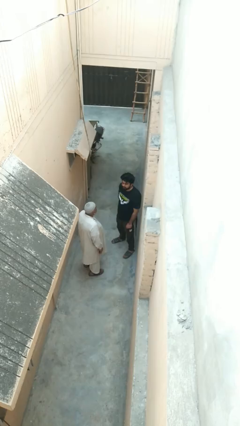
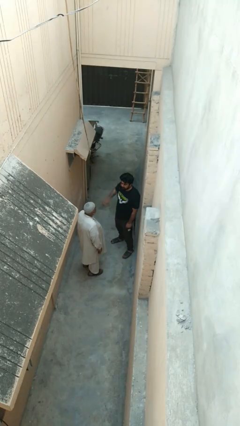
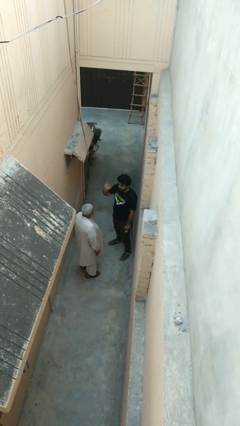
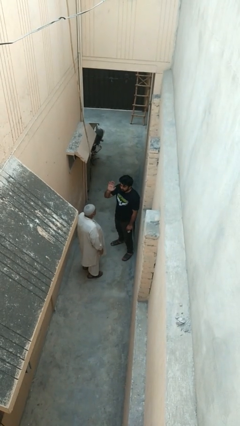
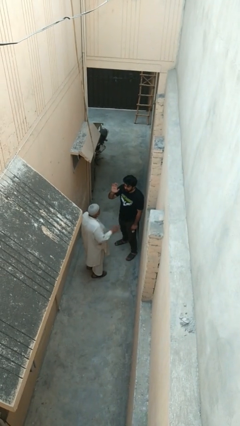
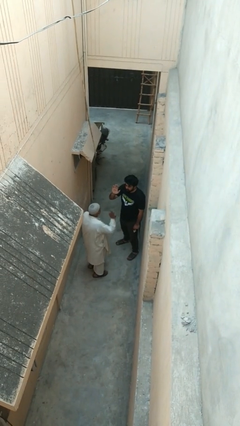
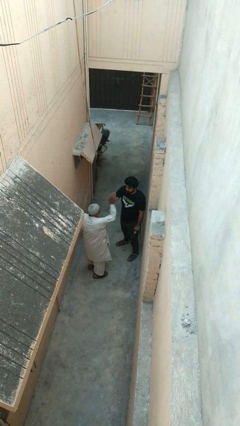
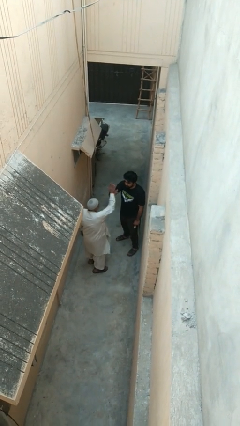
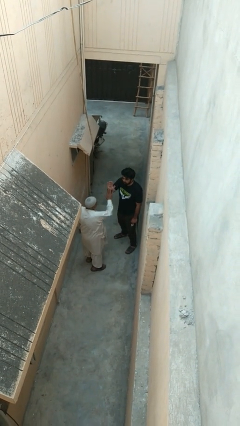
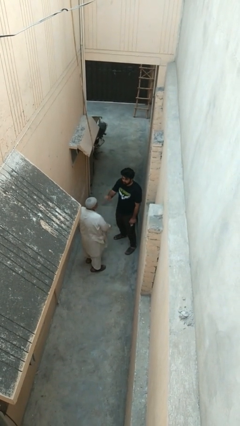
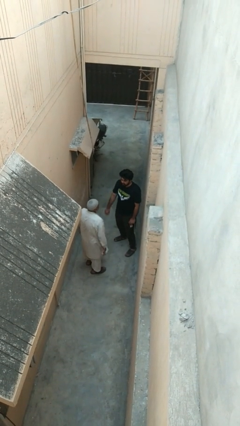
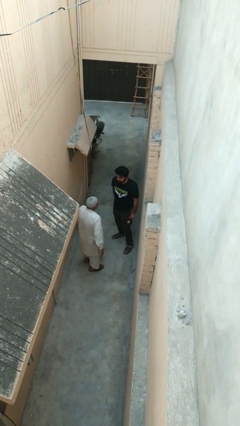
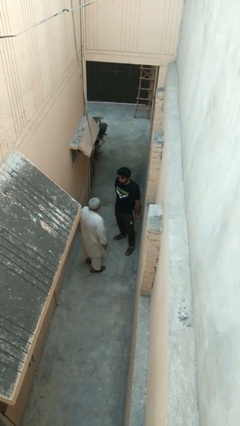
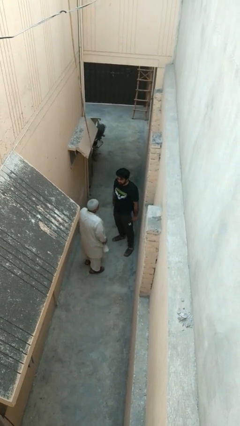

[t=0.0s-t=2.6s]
person highfives hand

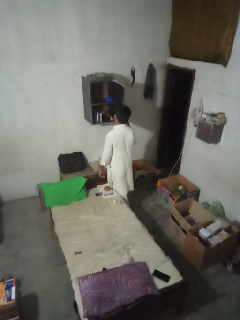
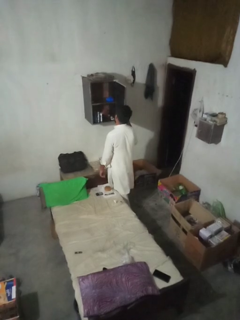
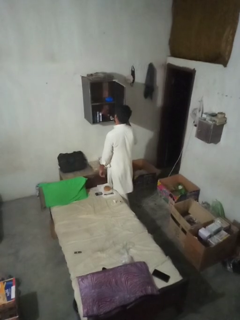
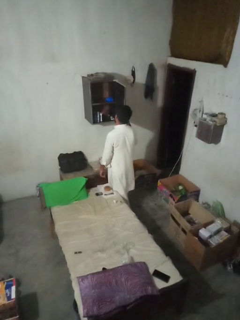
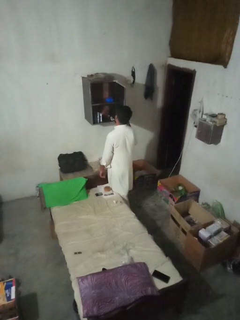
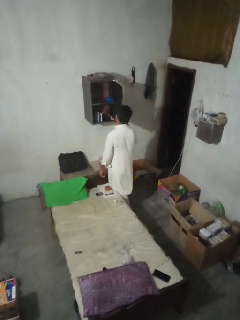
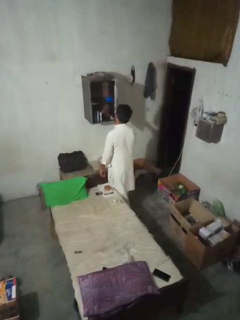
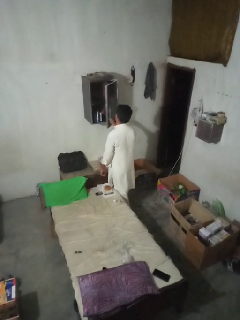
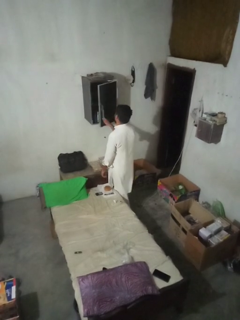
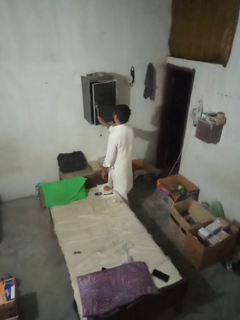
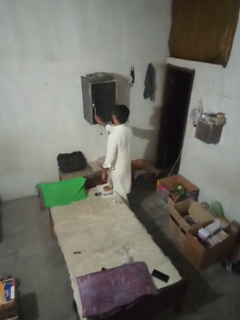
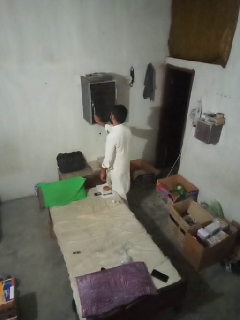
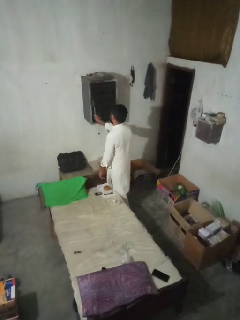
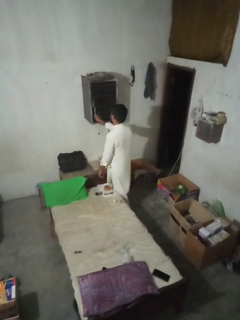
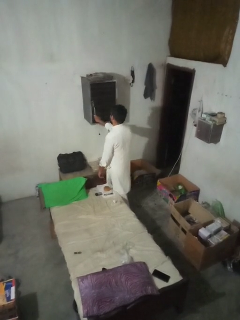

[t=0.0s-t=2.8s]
person closes dresser drawer

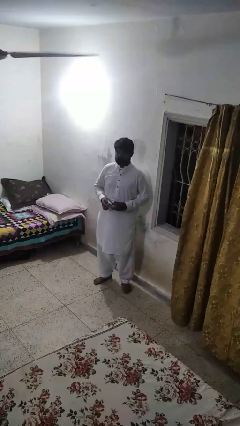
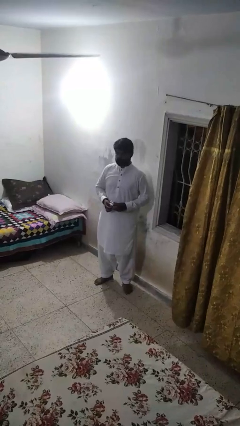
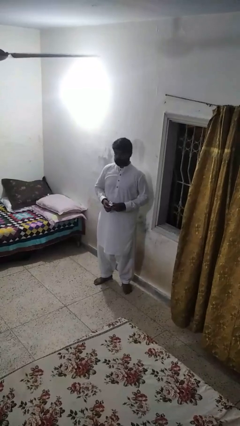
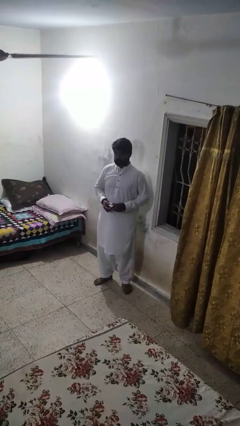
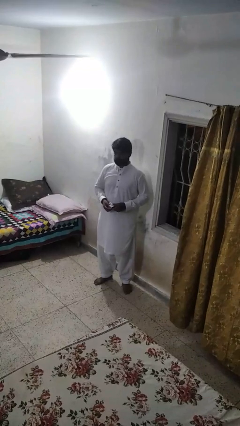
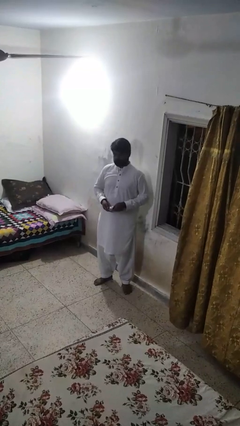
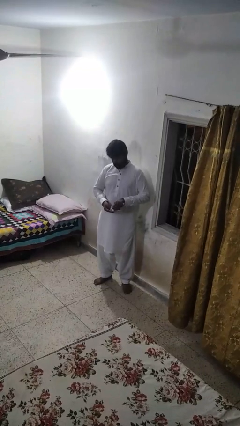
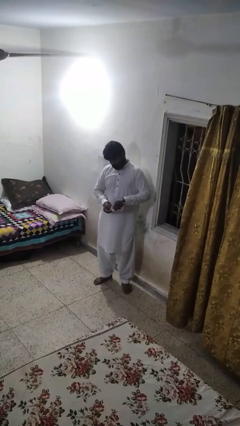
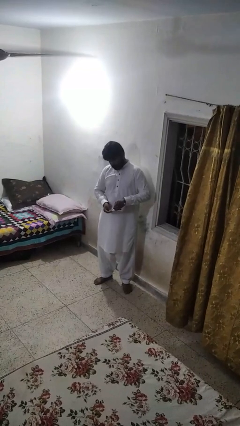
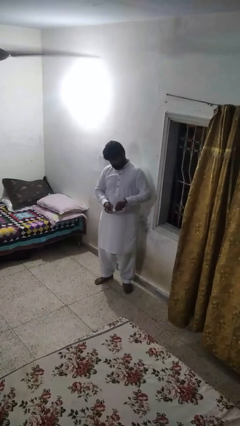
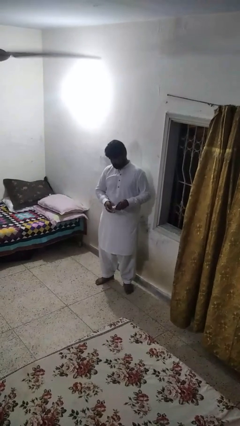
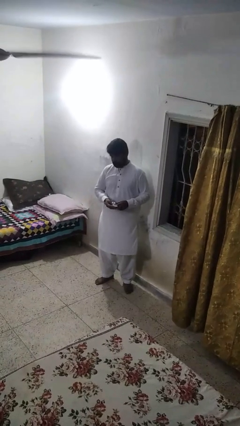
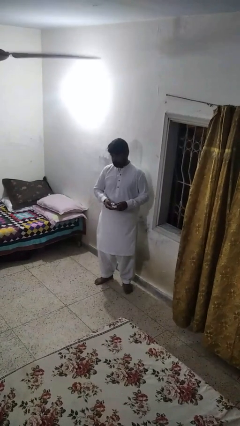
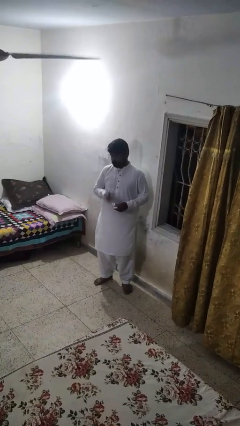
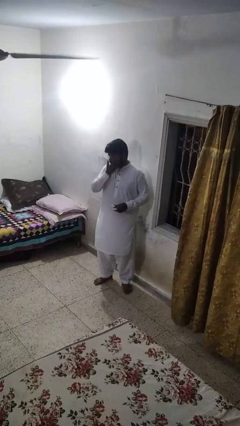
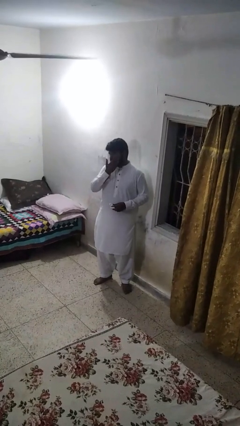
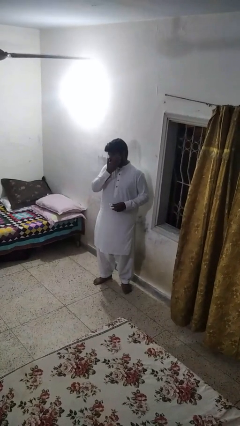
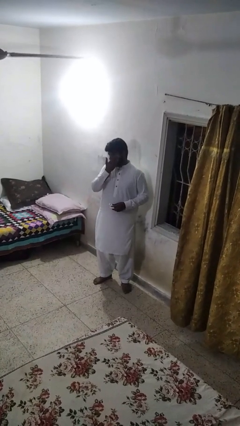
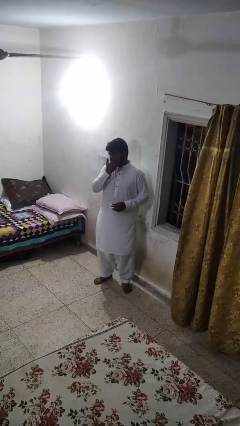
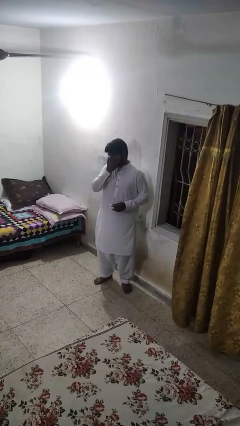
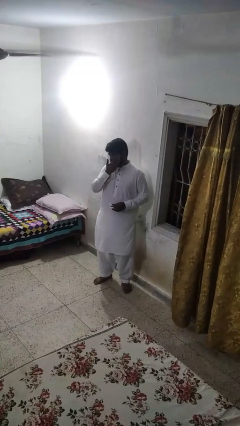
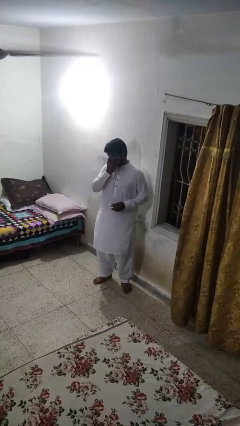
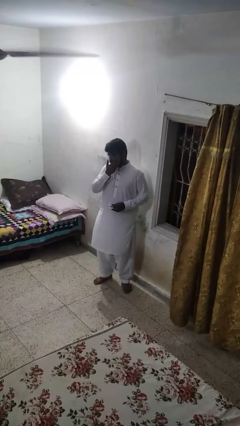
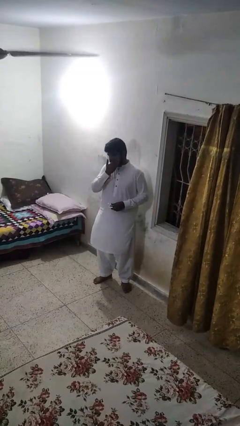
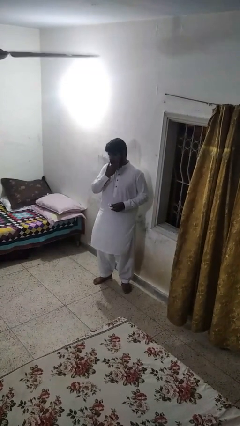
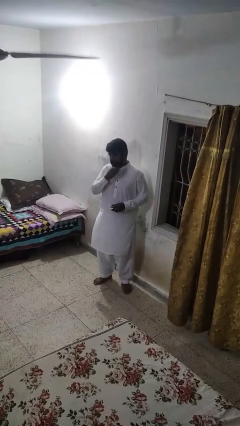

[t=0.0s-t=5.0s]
person applies shaving cream

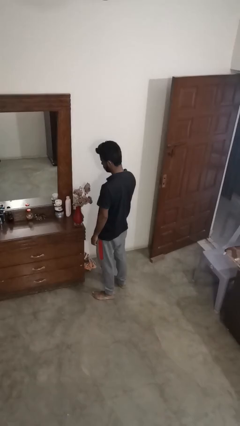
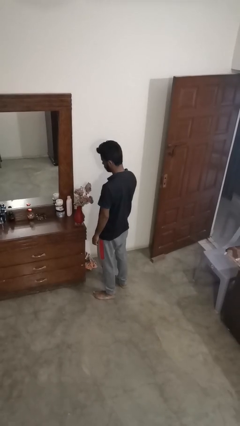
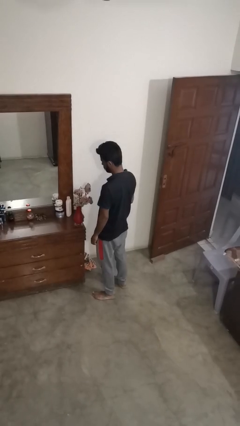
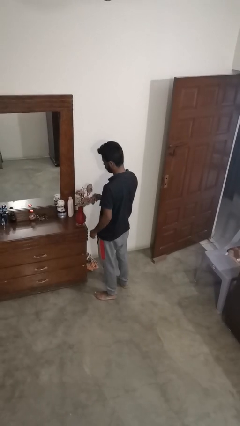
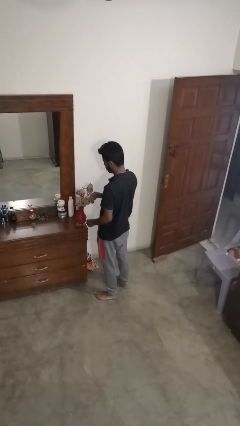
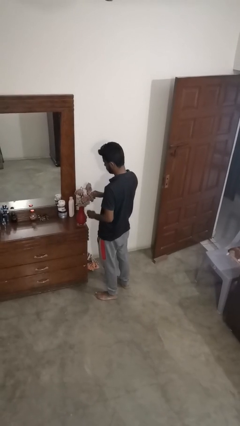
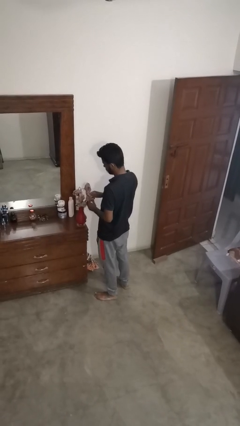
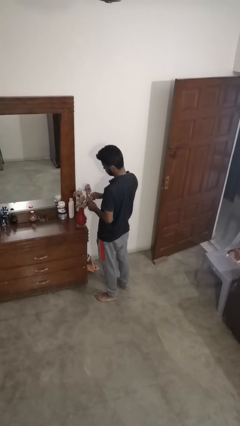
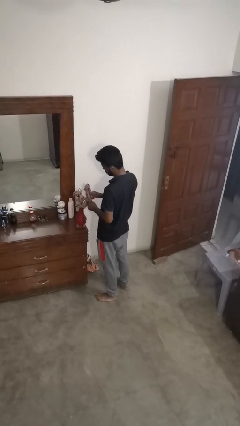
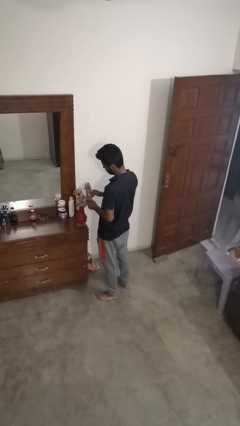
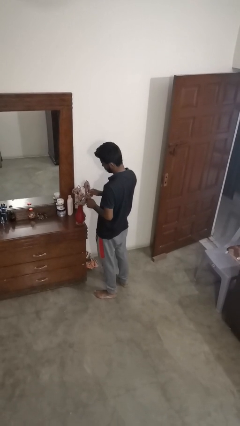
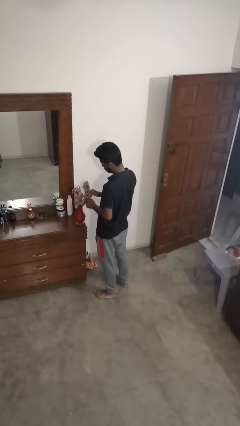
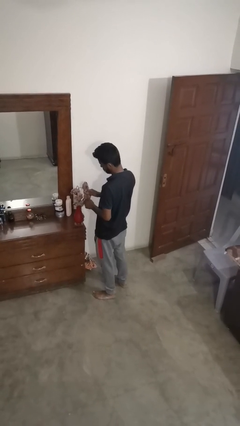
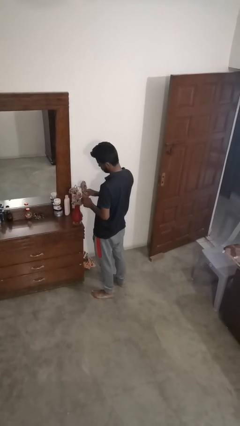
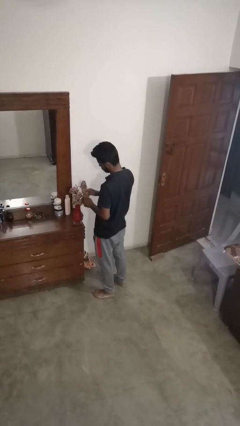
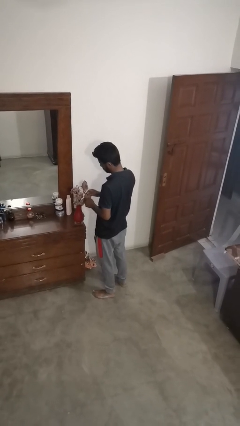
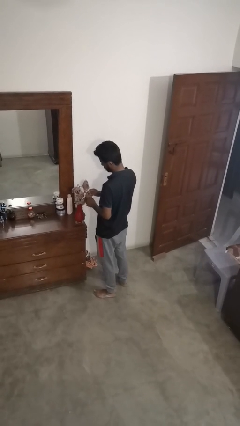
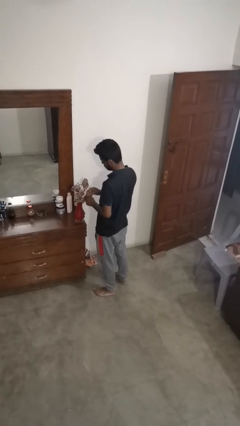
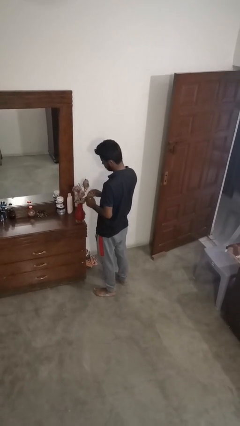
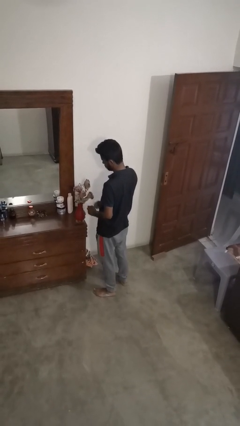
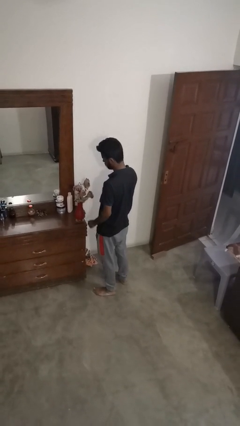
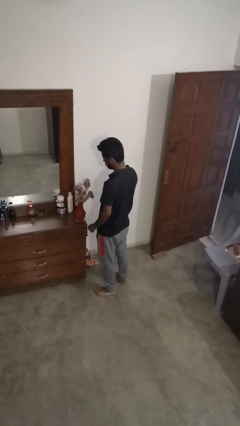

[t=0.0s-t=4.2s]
person arranges flowers in vase

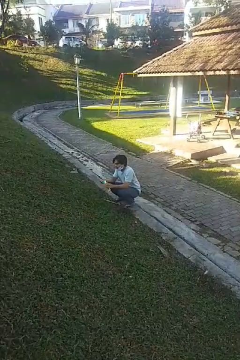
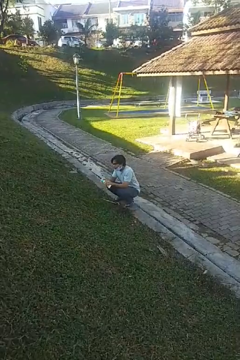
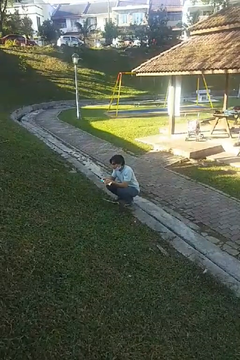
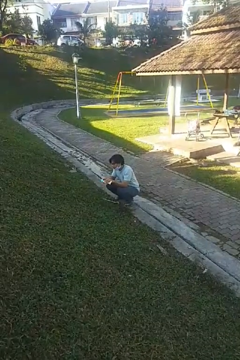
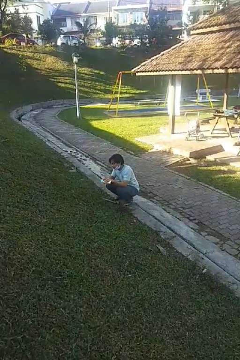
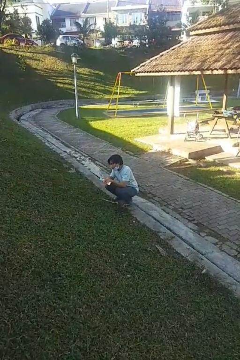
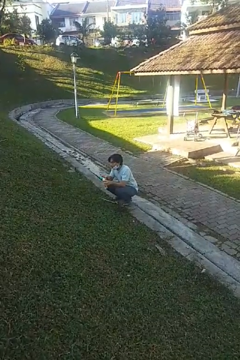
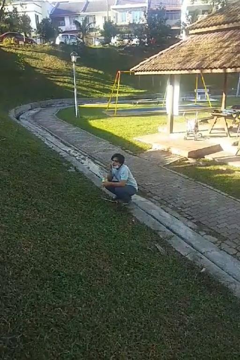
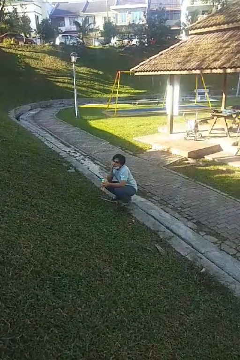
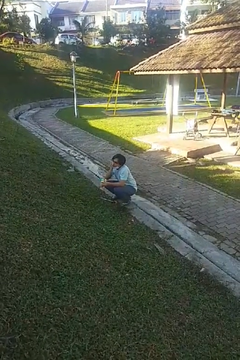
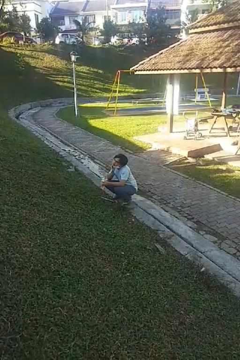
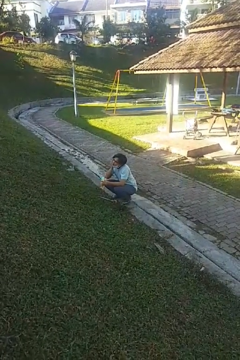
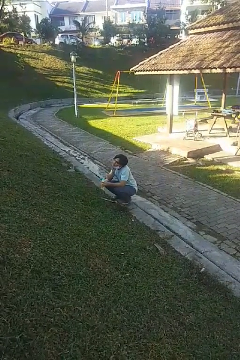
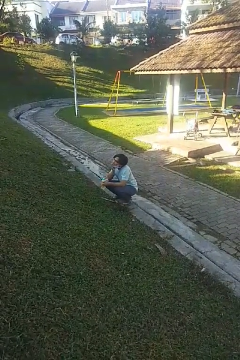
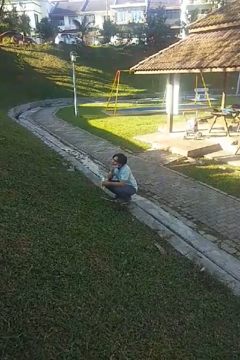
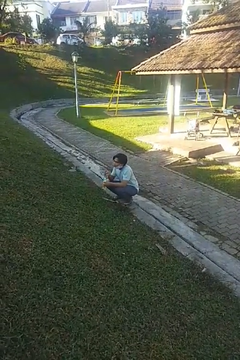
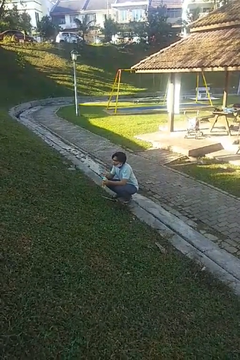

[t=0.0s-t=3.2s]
person applies facial moisturizer

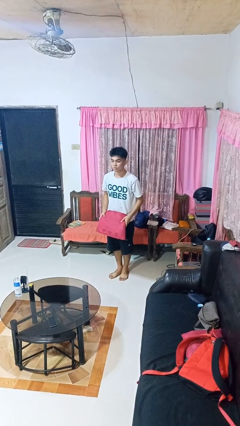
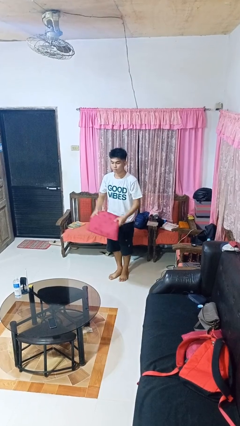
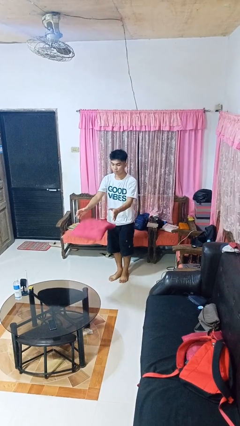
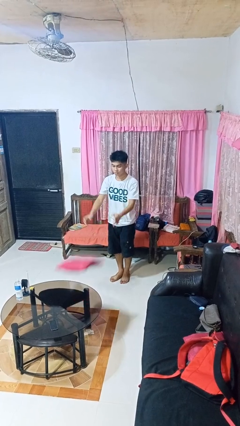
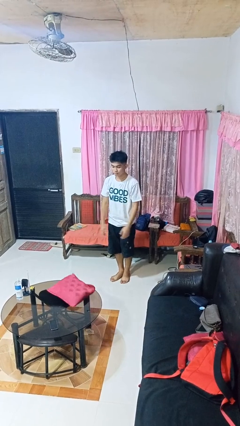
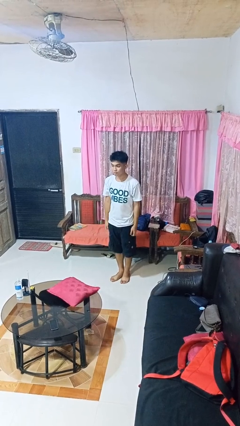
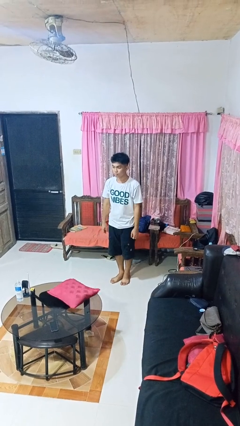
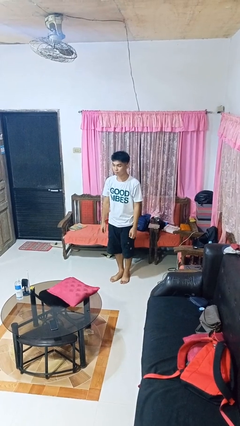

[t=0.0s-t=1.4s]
person throws object on table
